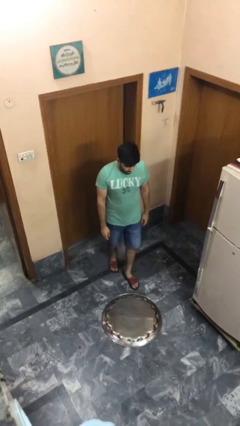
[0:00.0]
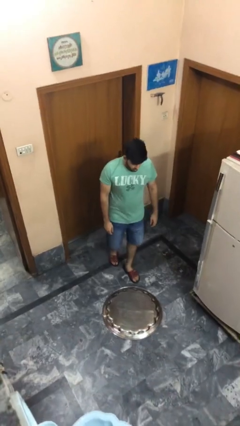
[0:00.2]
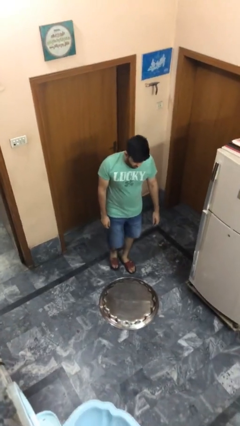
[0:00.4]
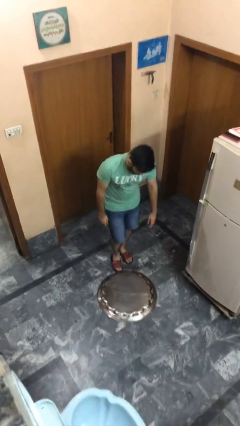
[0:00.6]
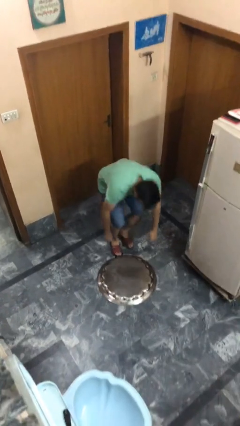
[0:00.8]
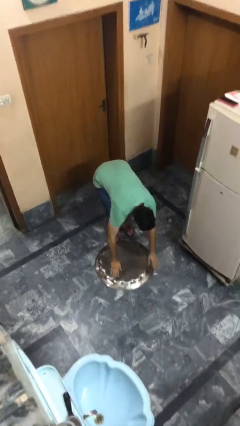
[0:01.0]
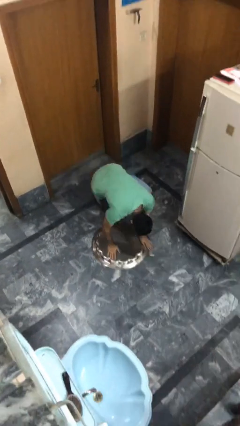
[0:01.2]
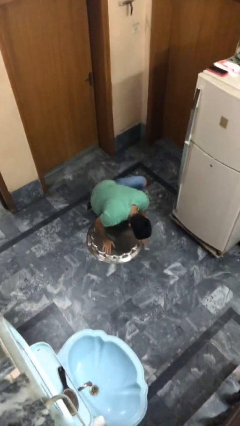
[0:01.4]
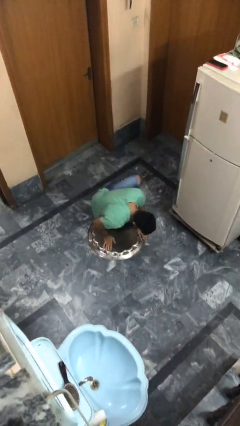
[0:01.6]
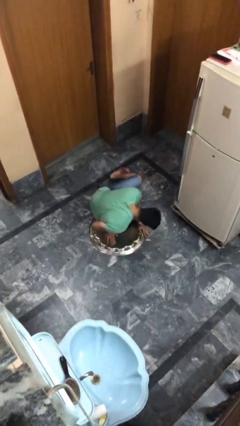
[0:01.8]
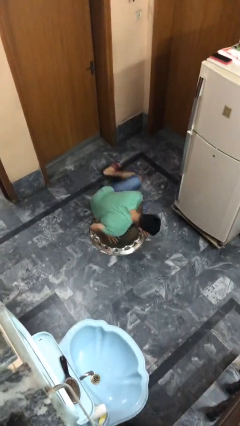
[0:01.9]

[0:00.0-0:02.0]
person trips on object on floor

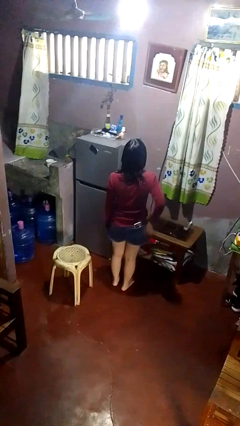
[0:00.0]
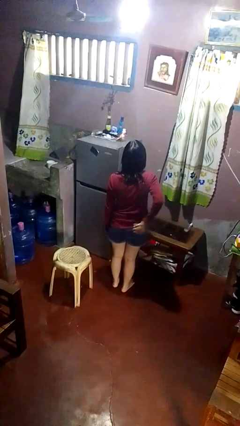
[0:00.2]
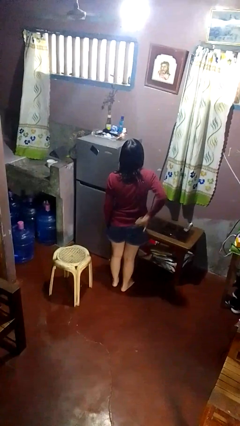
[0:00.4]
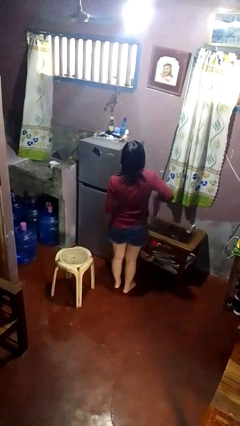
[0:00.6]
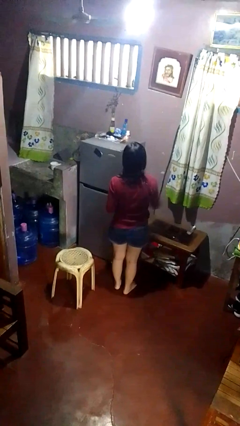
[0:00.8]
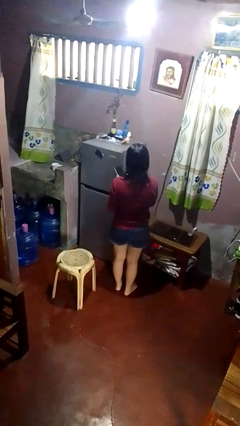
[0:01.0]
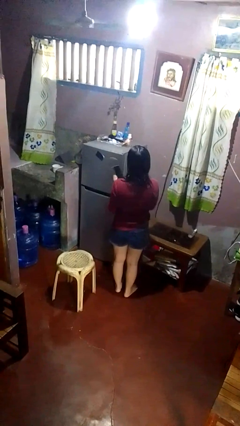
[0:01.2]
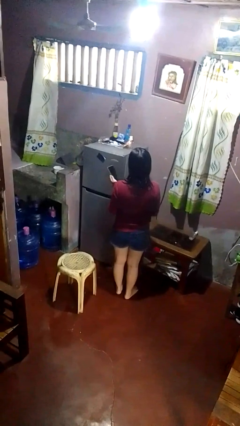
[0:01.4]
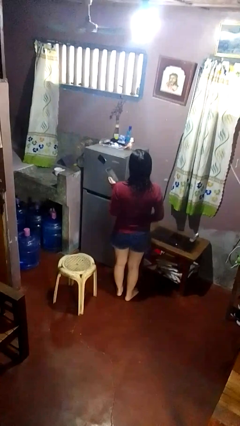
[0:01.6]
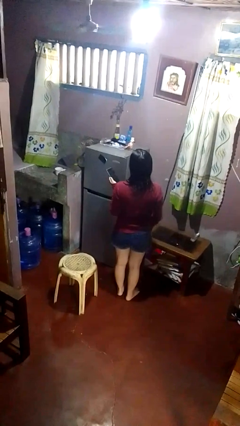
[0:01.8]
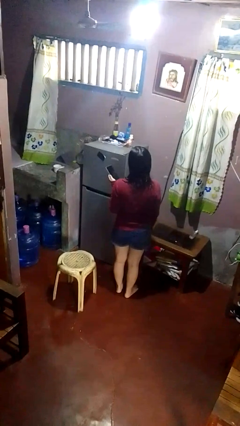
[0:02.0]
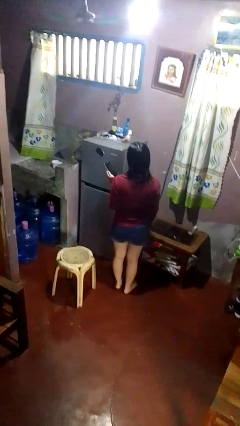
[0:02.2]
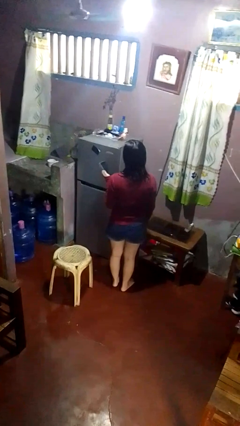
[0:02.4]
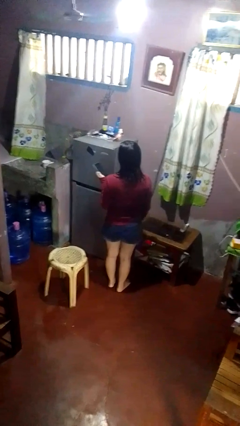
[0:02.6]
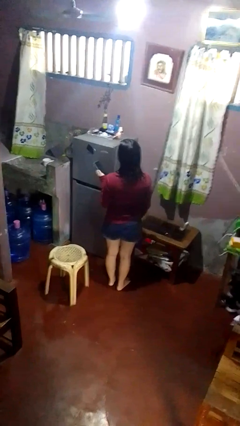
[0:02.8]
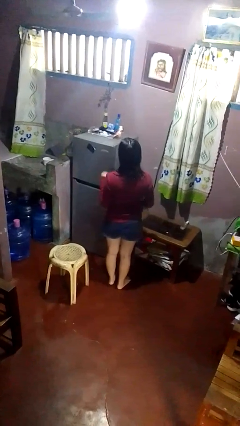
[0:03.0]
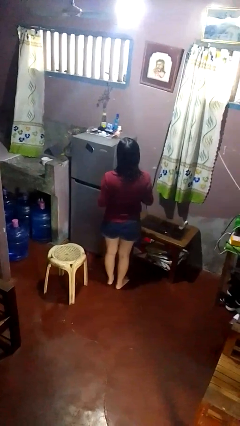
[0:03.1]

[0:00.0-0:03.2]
person takes phone from pocket

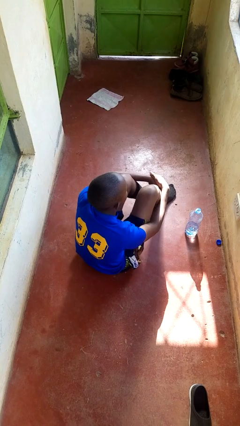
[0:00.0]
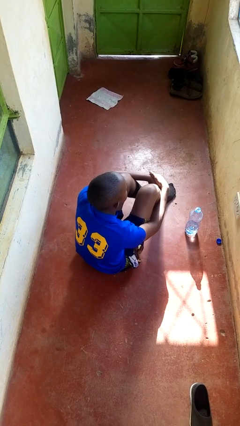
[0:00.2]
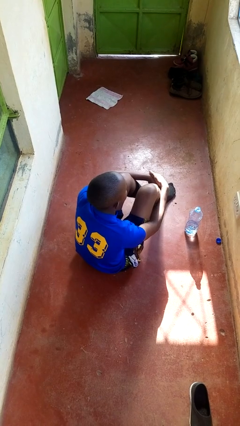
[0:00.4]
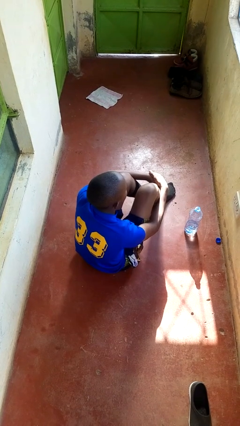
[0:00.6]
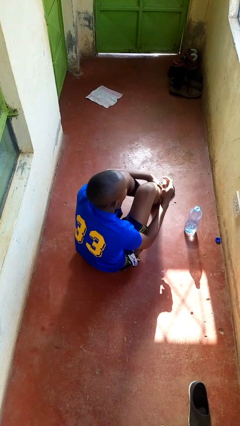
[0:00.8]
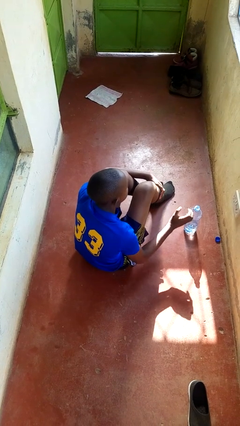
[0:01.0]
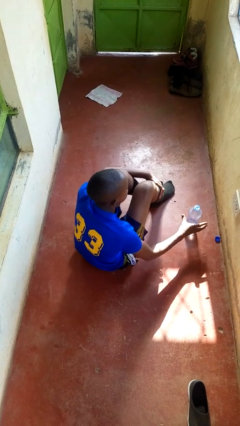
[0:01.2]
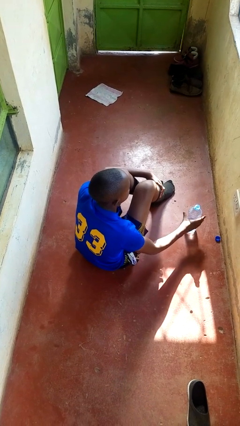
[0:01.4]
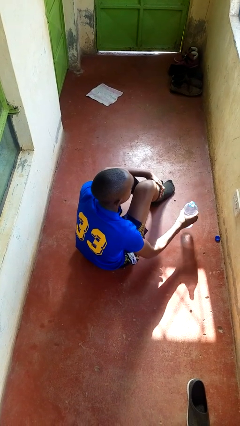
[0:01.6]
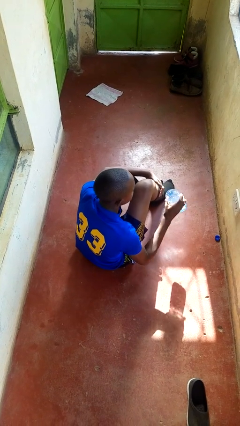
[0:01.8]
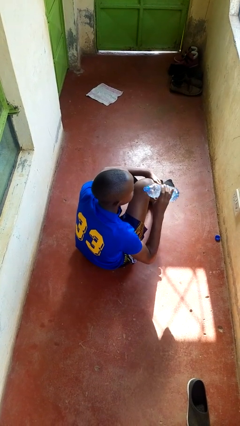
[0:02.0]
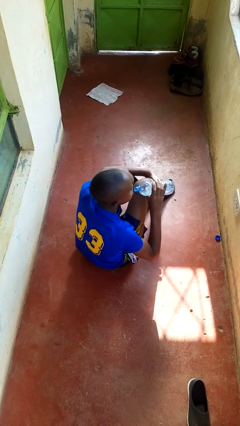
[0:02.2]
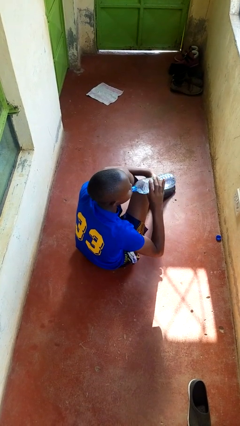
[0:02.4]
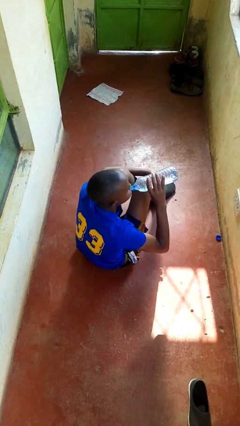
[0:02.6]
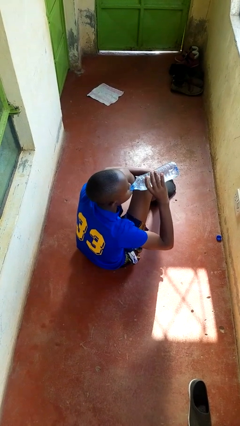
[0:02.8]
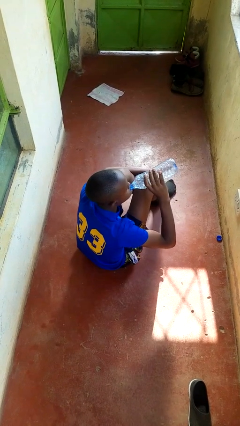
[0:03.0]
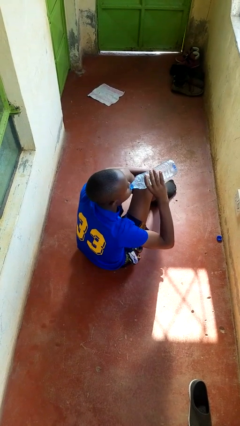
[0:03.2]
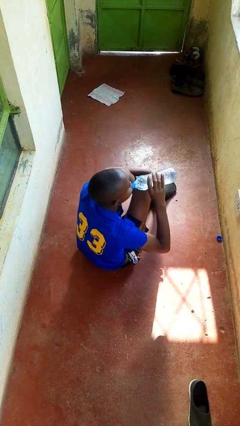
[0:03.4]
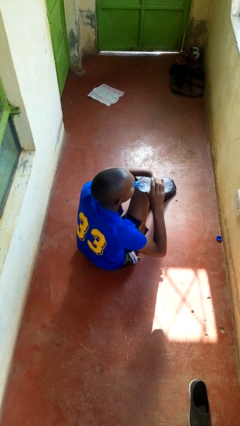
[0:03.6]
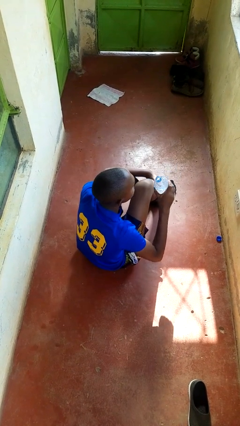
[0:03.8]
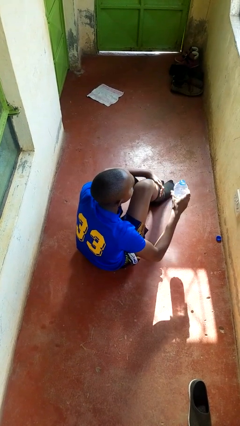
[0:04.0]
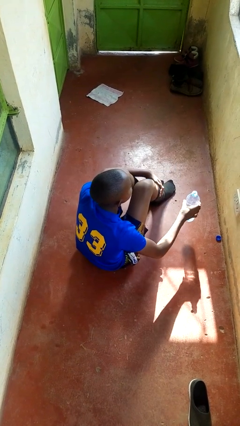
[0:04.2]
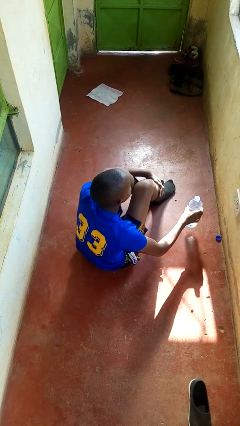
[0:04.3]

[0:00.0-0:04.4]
person drinks from bottle

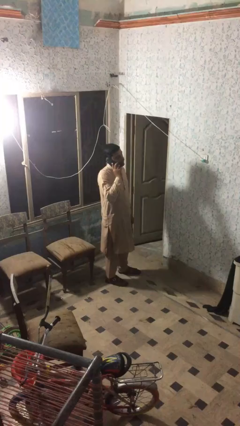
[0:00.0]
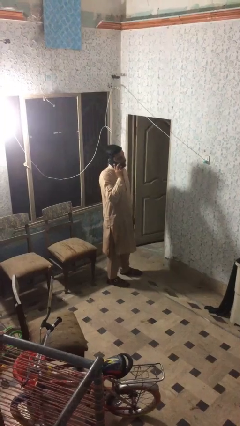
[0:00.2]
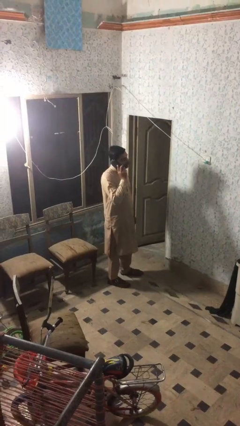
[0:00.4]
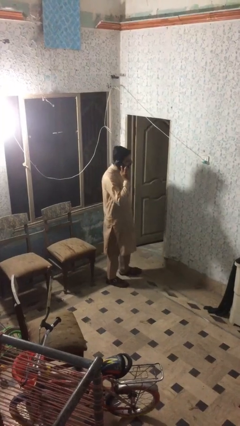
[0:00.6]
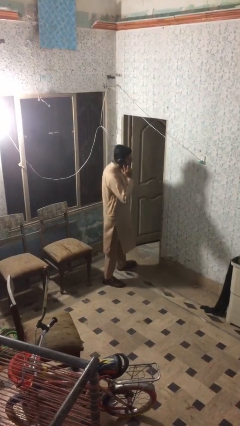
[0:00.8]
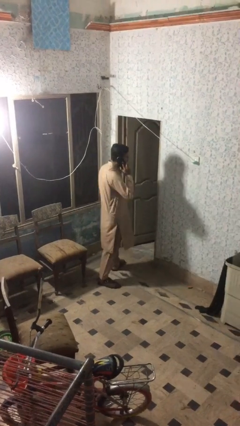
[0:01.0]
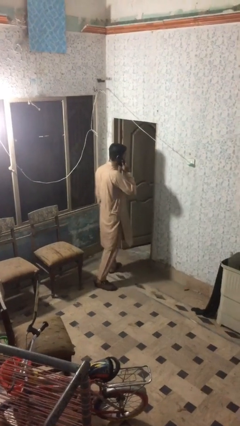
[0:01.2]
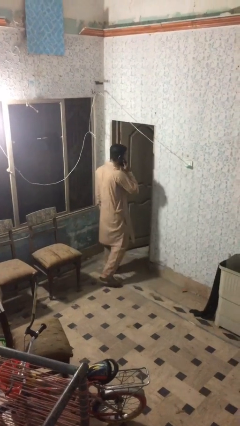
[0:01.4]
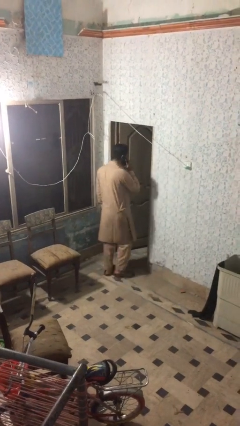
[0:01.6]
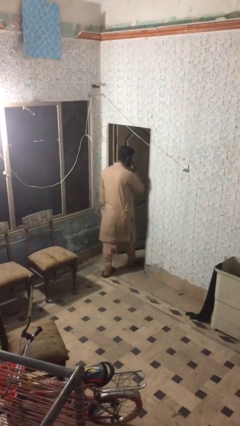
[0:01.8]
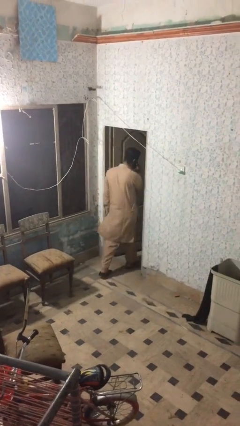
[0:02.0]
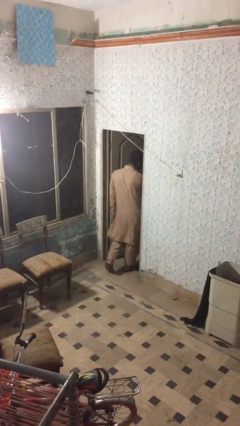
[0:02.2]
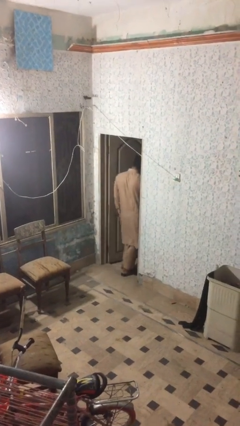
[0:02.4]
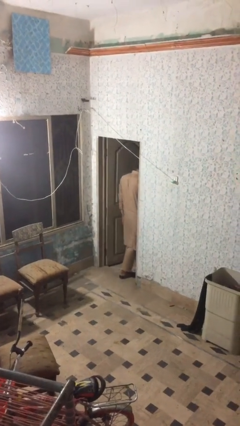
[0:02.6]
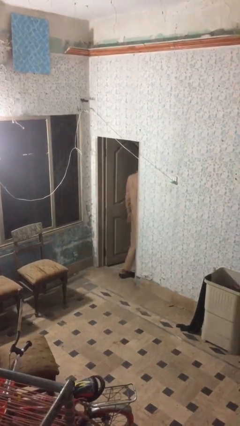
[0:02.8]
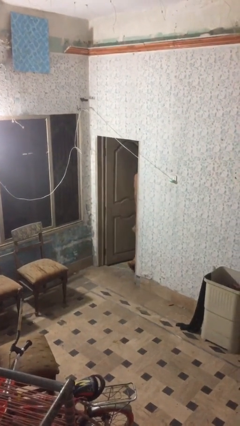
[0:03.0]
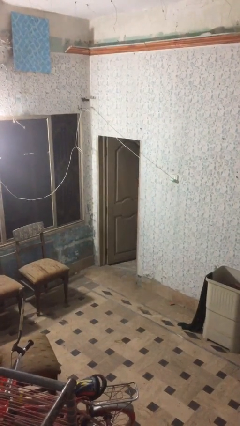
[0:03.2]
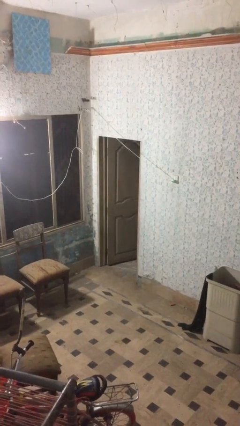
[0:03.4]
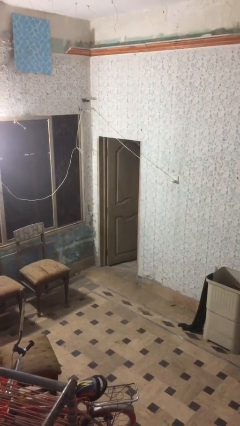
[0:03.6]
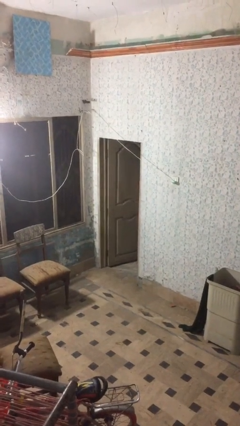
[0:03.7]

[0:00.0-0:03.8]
person exits scene through structure

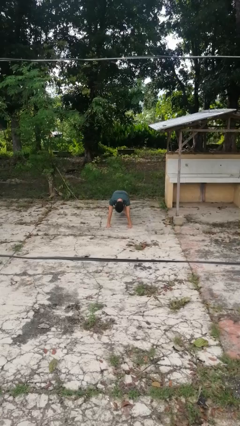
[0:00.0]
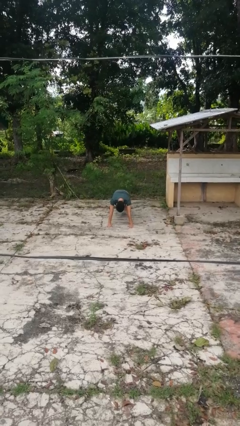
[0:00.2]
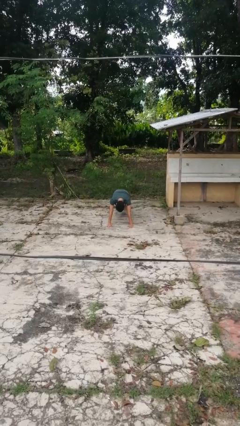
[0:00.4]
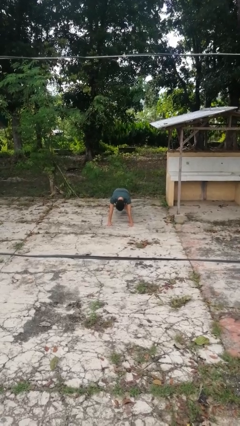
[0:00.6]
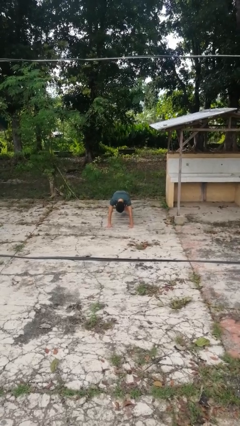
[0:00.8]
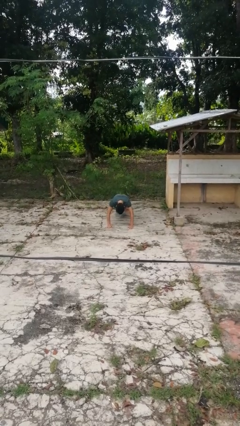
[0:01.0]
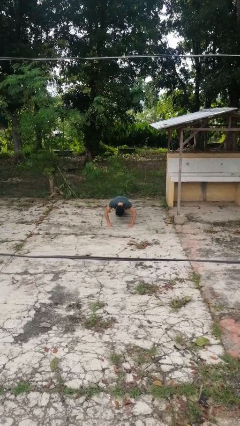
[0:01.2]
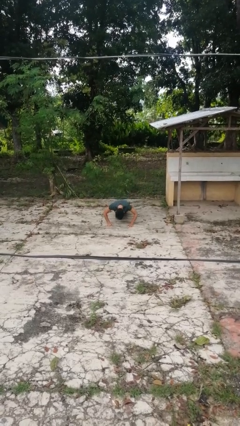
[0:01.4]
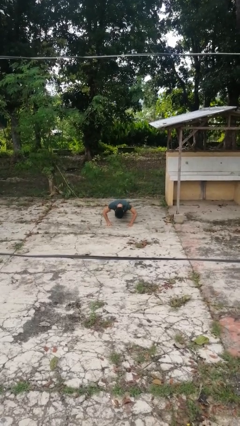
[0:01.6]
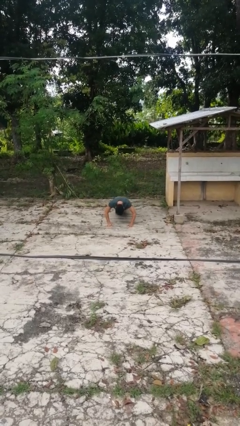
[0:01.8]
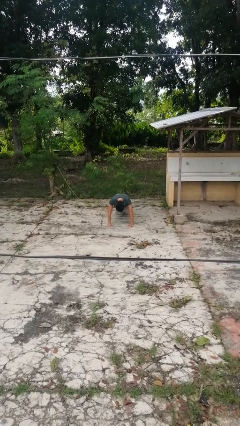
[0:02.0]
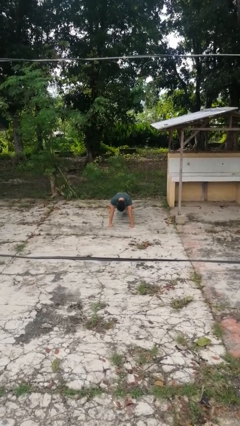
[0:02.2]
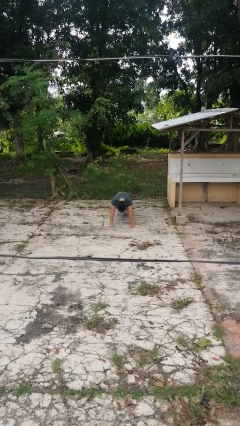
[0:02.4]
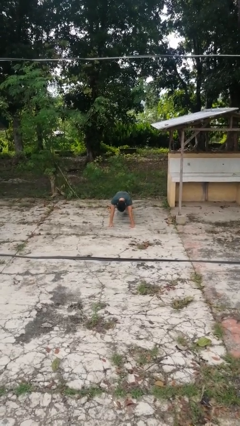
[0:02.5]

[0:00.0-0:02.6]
person exercises with pushup

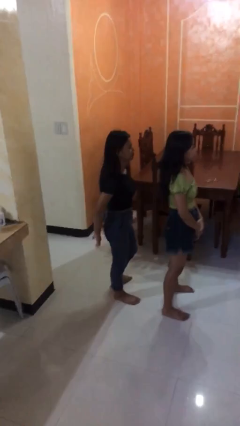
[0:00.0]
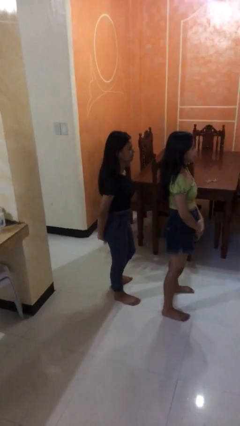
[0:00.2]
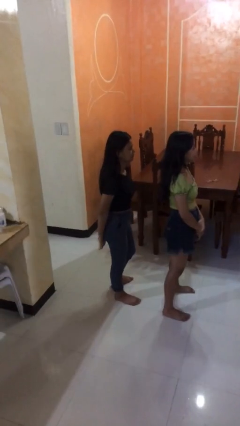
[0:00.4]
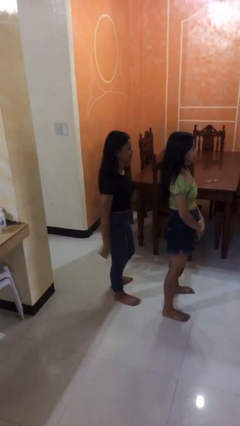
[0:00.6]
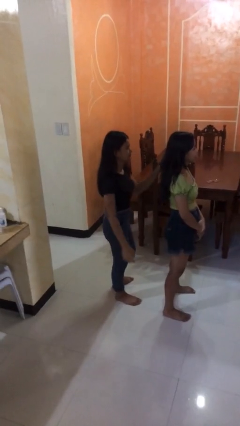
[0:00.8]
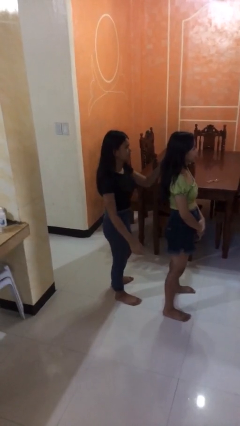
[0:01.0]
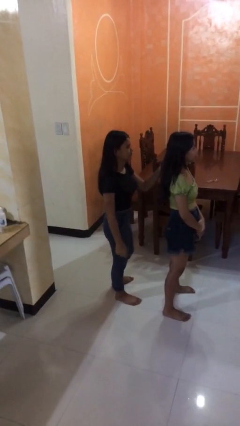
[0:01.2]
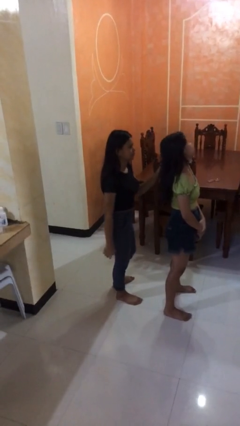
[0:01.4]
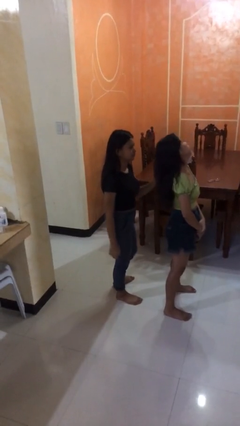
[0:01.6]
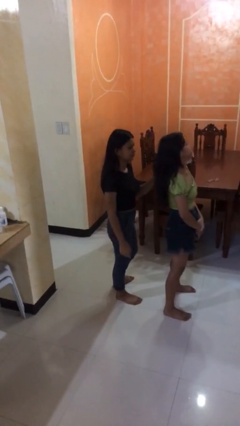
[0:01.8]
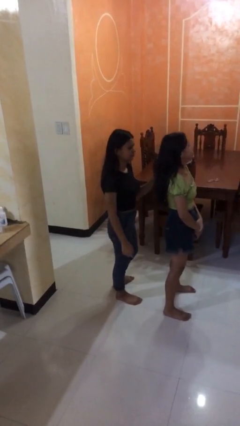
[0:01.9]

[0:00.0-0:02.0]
person grabs person by hair
